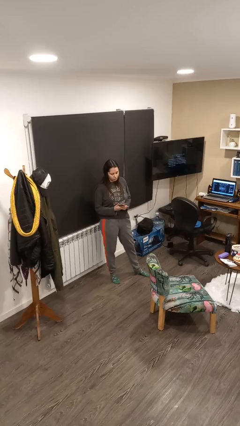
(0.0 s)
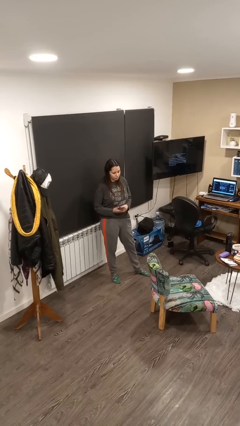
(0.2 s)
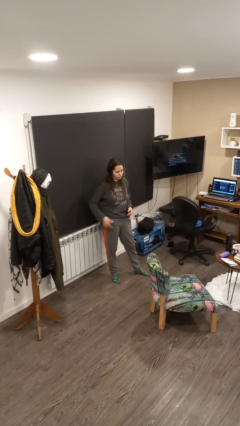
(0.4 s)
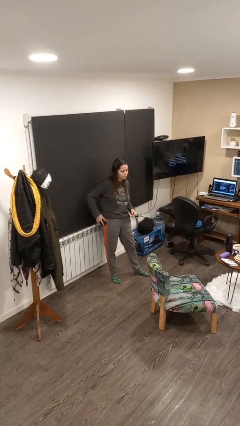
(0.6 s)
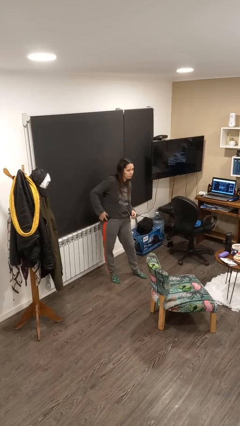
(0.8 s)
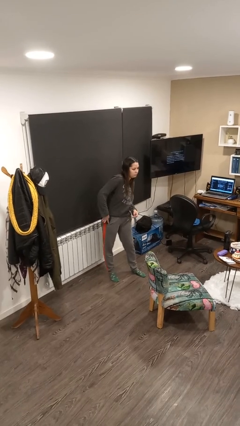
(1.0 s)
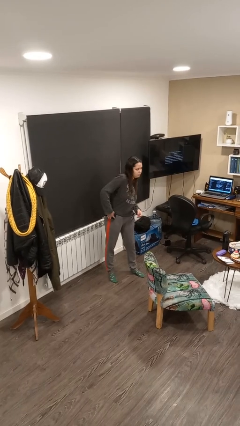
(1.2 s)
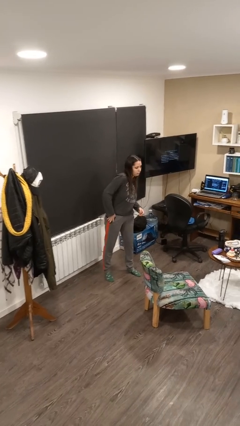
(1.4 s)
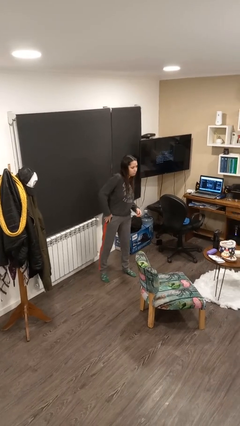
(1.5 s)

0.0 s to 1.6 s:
person puts phone into pocket

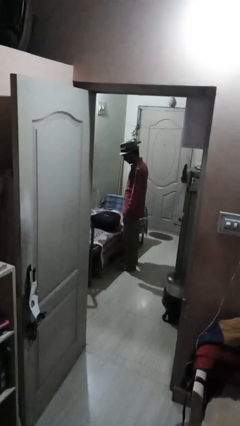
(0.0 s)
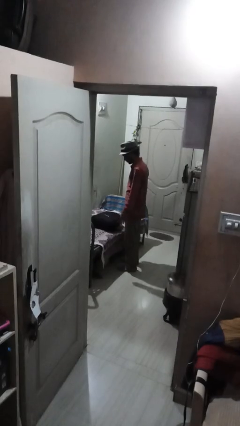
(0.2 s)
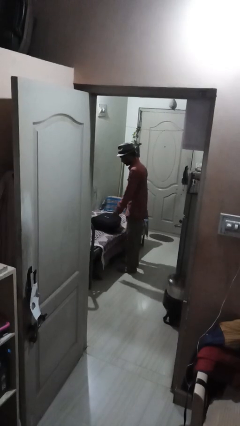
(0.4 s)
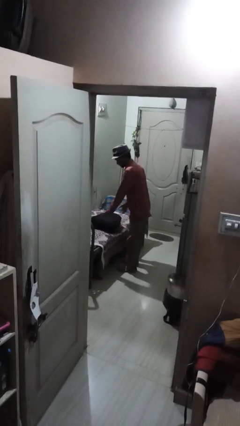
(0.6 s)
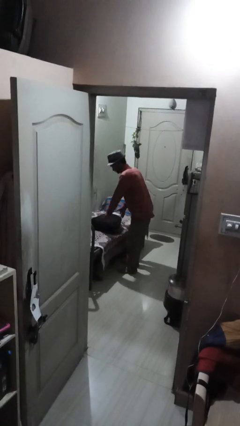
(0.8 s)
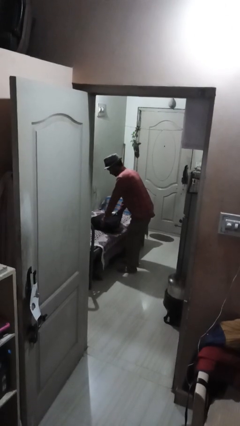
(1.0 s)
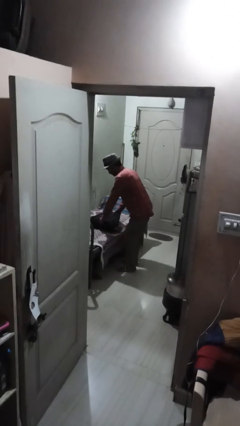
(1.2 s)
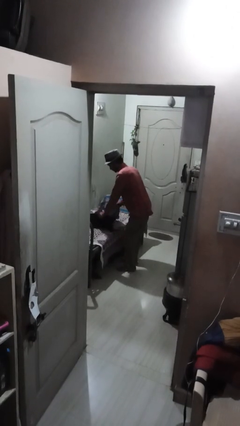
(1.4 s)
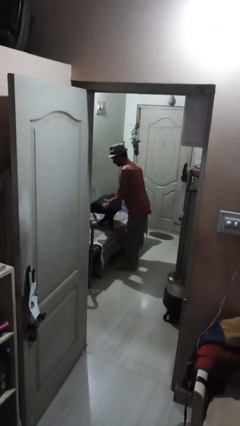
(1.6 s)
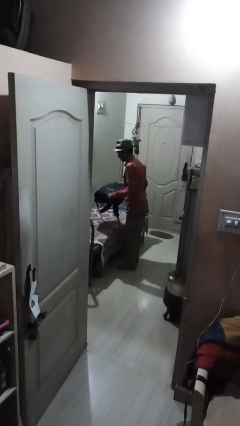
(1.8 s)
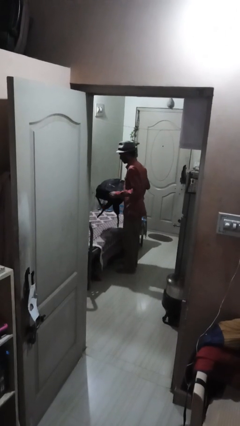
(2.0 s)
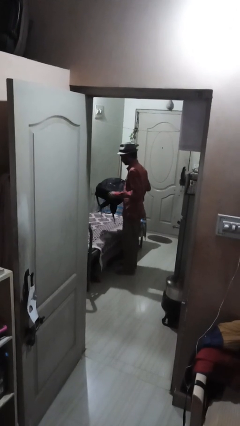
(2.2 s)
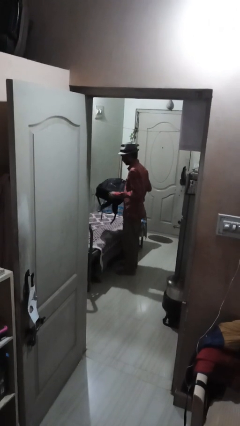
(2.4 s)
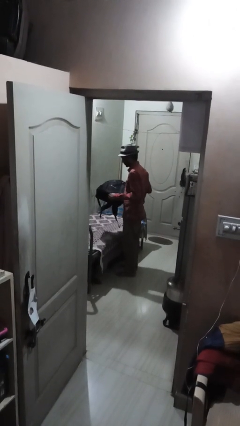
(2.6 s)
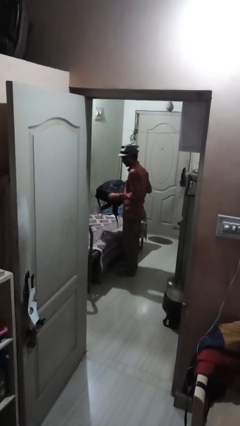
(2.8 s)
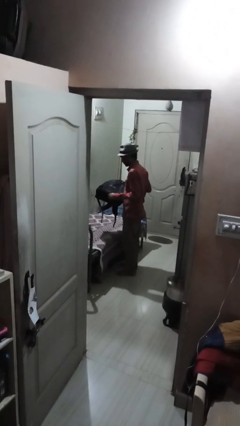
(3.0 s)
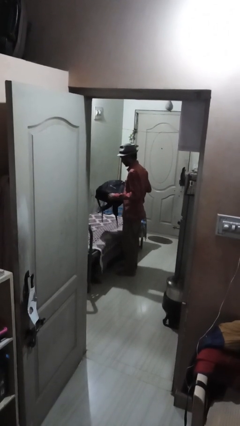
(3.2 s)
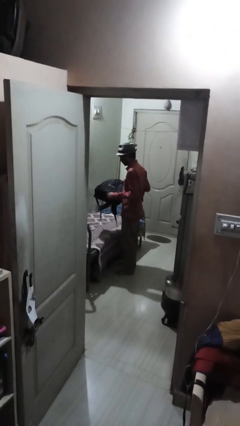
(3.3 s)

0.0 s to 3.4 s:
person picks up object from couch

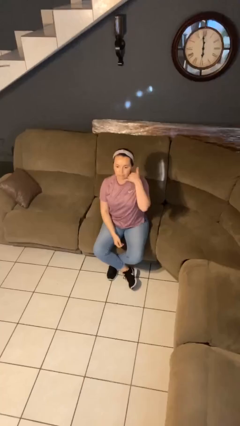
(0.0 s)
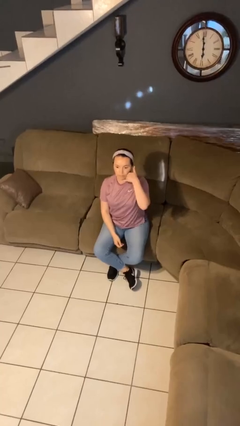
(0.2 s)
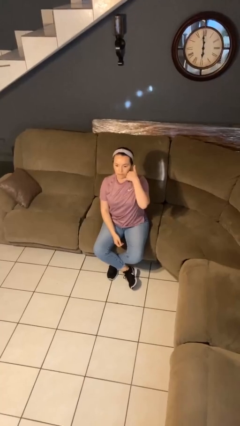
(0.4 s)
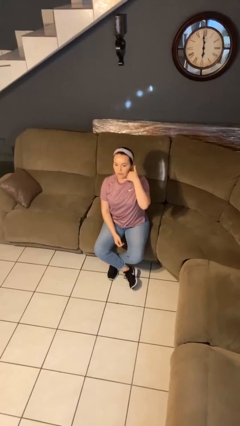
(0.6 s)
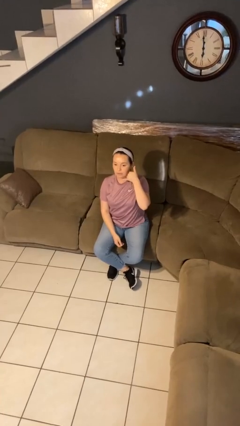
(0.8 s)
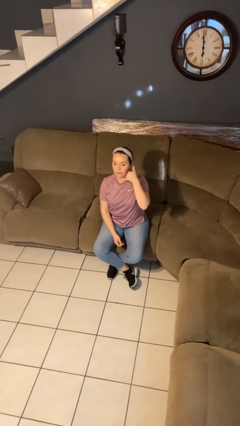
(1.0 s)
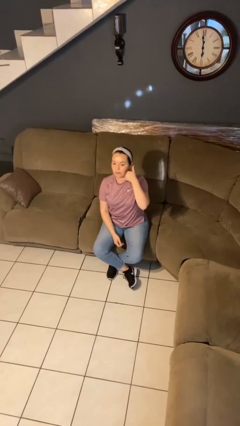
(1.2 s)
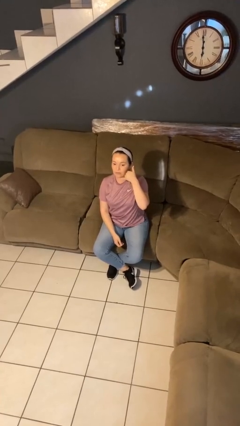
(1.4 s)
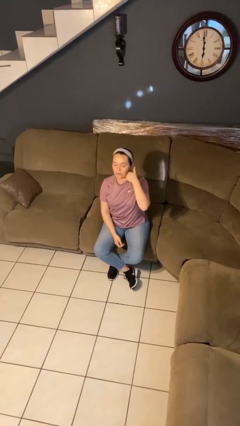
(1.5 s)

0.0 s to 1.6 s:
person gestures call me

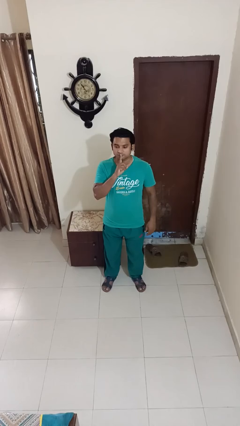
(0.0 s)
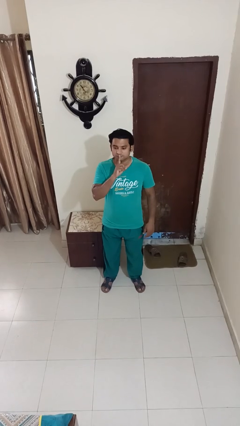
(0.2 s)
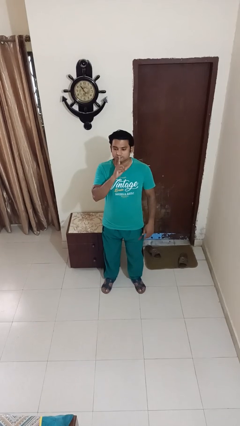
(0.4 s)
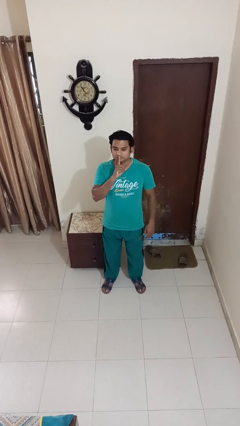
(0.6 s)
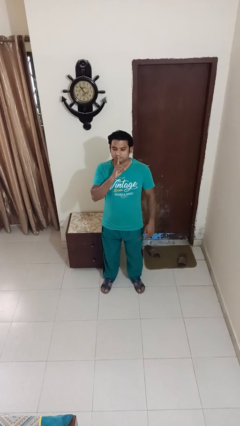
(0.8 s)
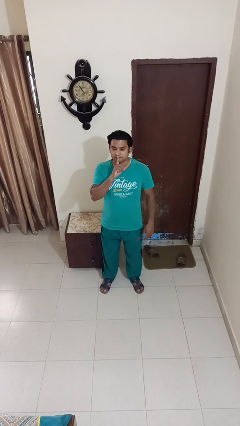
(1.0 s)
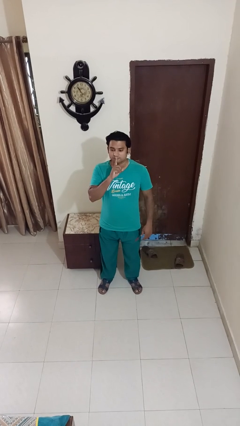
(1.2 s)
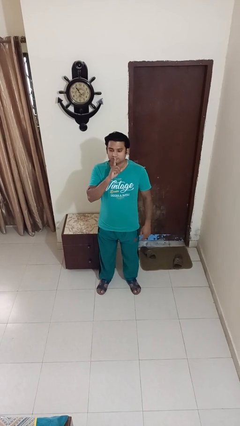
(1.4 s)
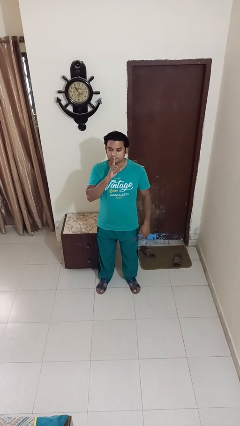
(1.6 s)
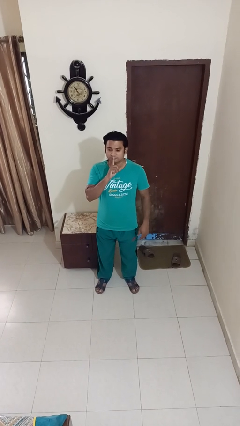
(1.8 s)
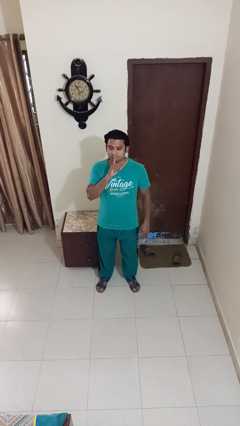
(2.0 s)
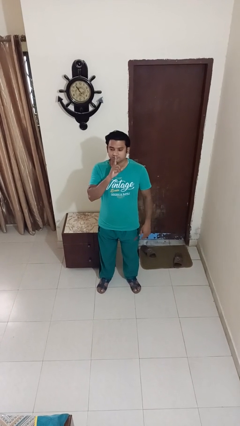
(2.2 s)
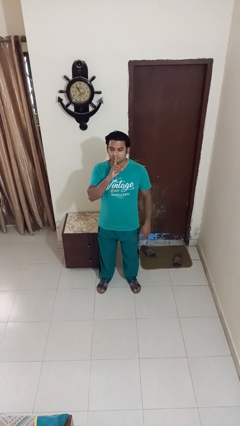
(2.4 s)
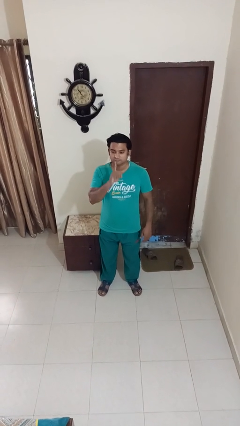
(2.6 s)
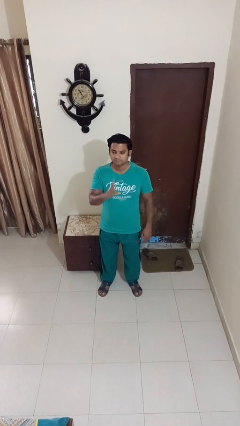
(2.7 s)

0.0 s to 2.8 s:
person gestures be quiet

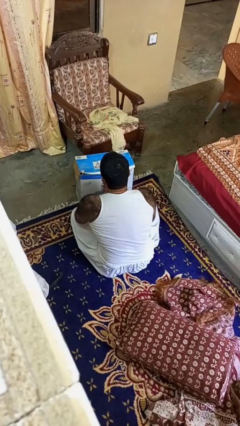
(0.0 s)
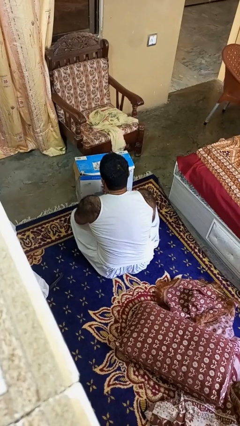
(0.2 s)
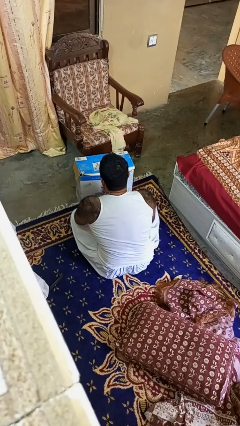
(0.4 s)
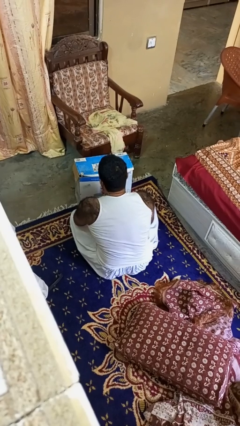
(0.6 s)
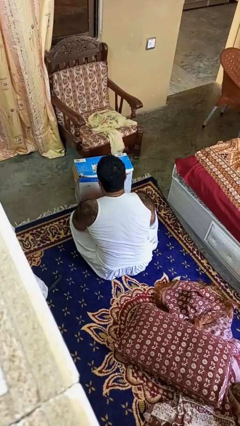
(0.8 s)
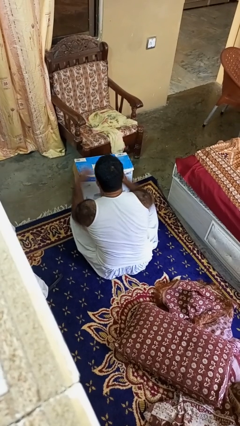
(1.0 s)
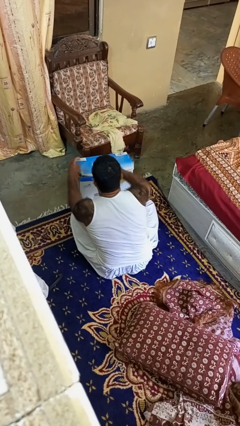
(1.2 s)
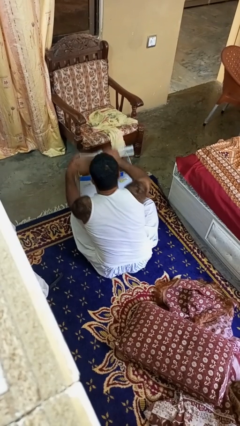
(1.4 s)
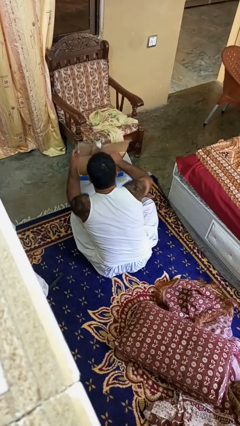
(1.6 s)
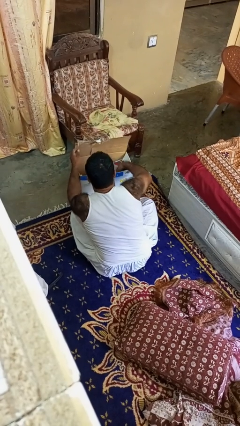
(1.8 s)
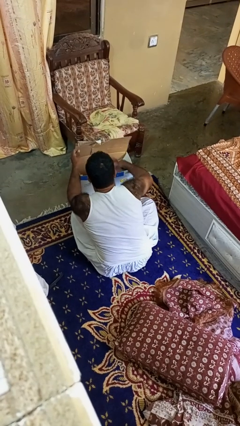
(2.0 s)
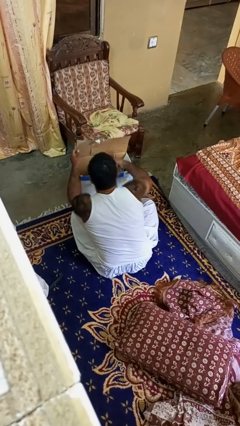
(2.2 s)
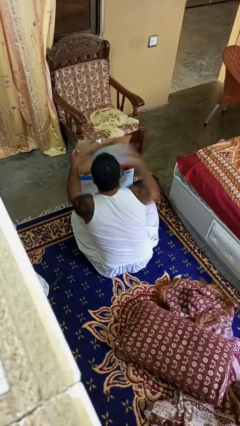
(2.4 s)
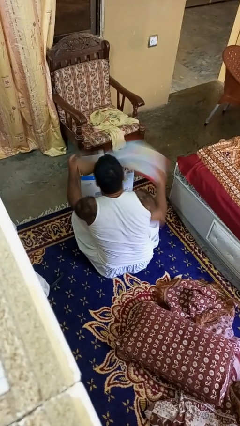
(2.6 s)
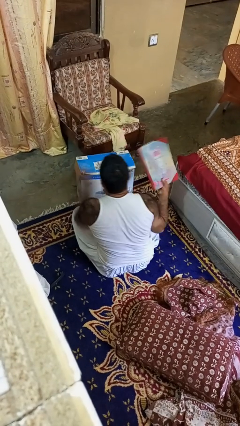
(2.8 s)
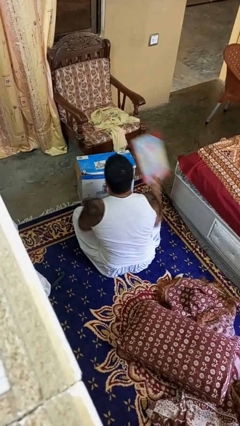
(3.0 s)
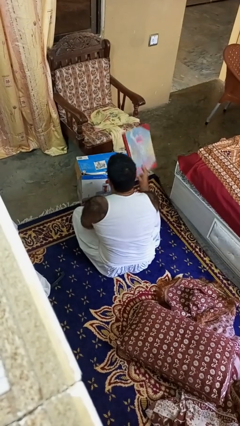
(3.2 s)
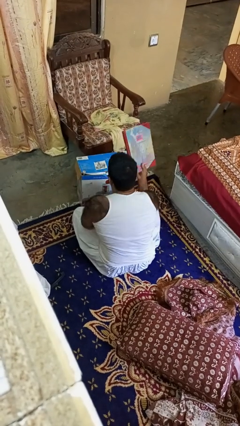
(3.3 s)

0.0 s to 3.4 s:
person takes object from box

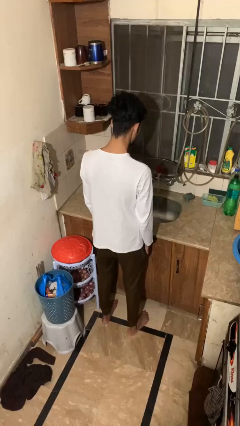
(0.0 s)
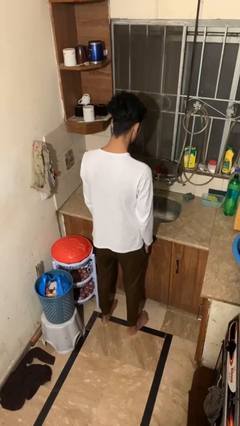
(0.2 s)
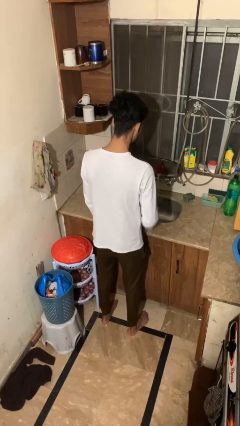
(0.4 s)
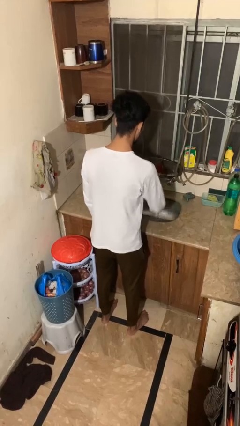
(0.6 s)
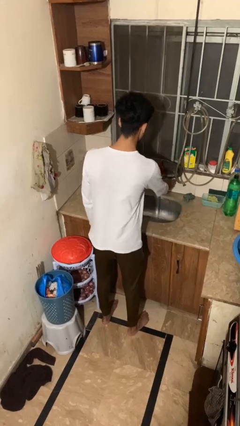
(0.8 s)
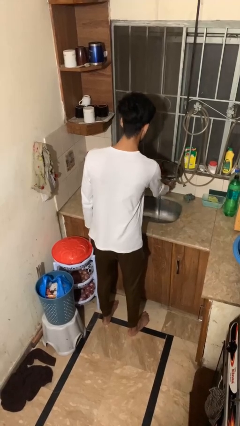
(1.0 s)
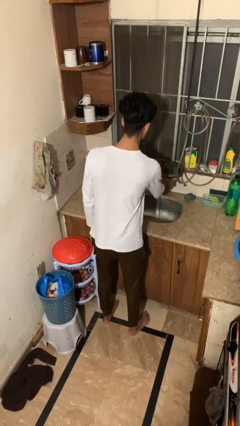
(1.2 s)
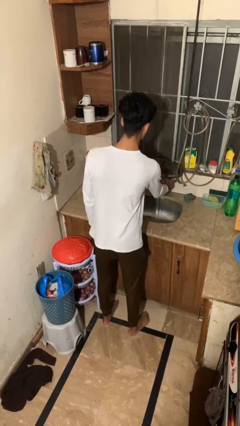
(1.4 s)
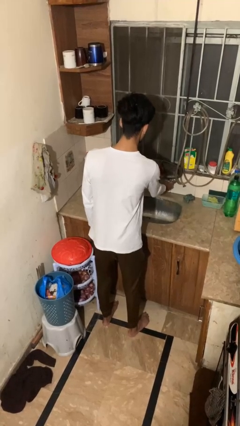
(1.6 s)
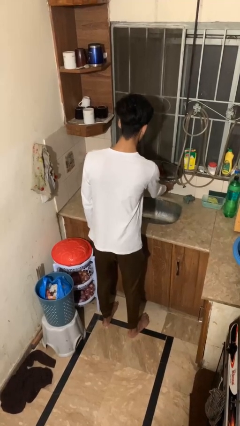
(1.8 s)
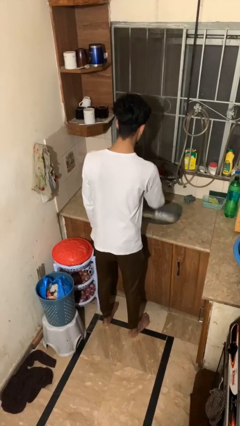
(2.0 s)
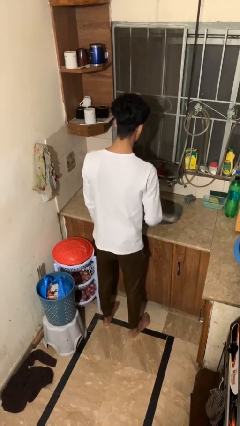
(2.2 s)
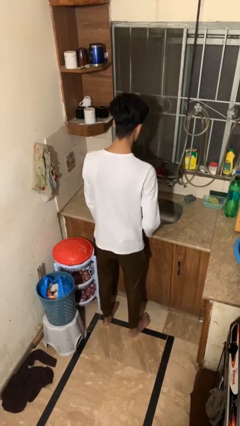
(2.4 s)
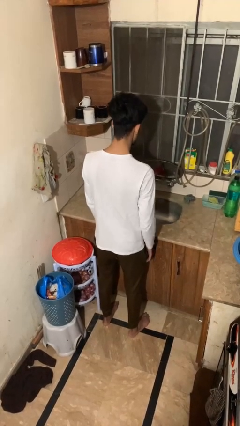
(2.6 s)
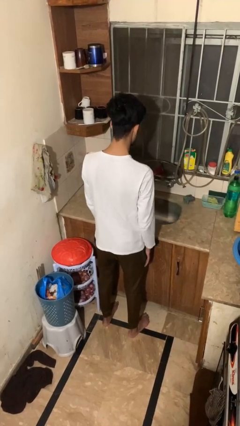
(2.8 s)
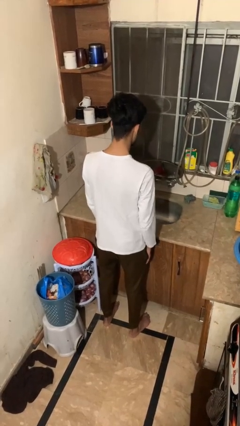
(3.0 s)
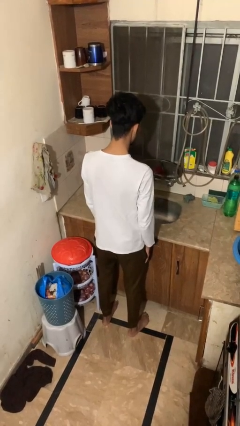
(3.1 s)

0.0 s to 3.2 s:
person turns off faucet

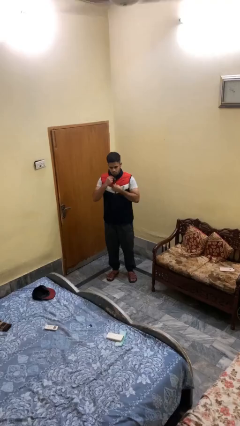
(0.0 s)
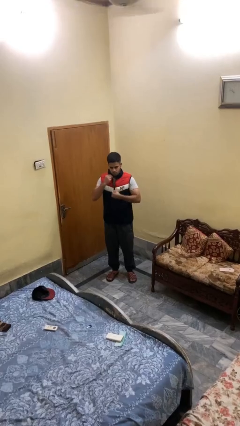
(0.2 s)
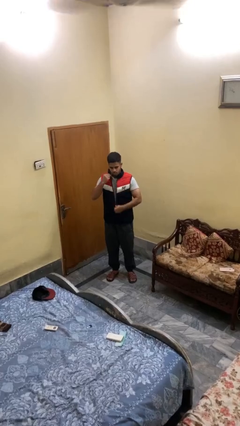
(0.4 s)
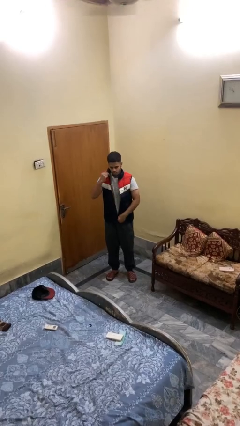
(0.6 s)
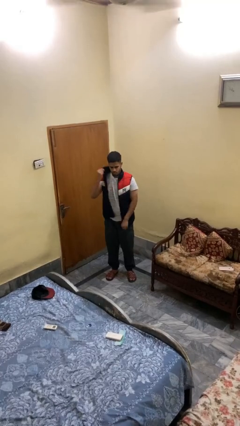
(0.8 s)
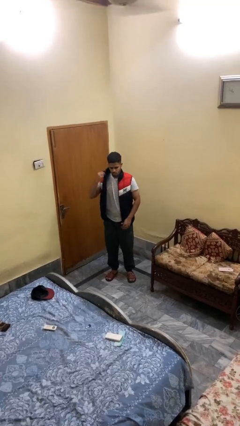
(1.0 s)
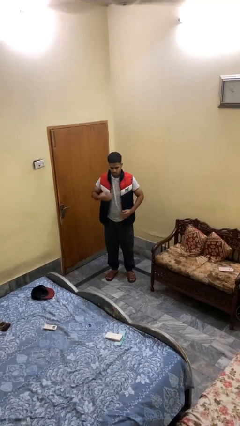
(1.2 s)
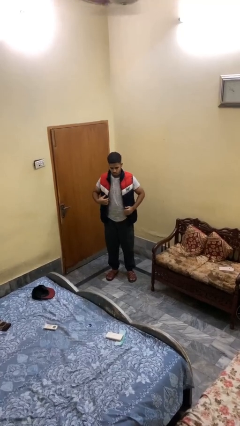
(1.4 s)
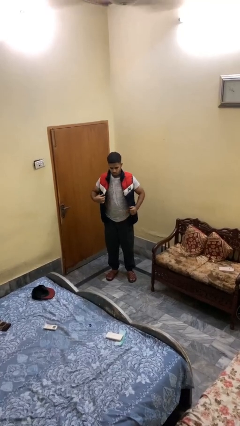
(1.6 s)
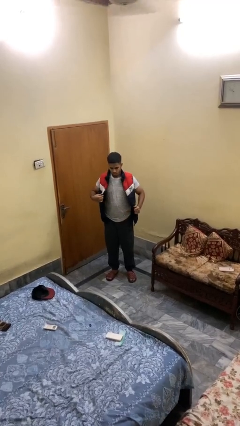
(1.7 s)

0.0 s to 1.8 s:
person unzips jacket
